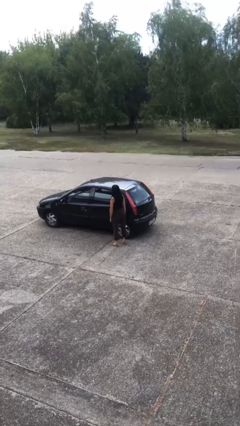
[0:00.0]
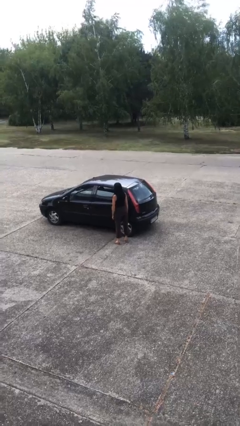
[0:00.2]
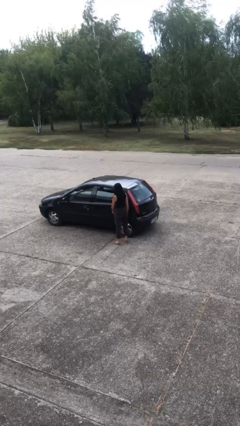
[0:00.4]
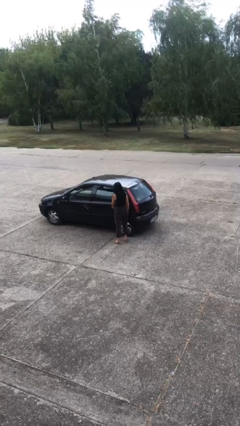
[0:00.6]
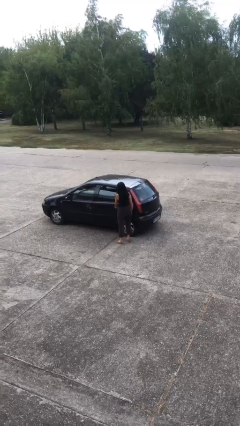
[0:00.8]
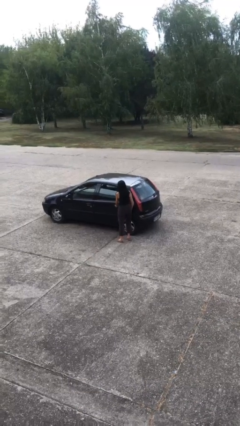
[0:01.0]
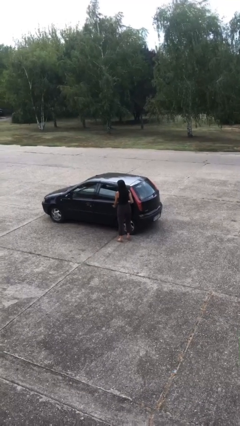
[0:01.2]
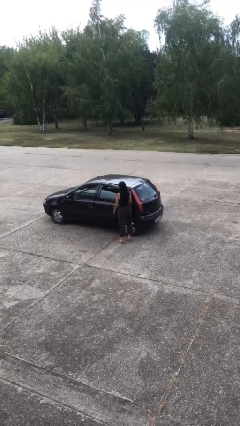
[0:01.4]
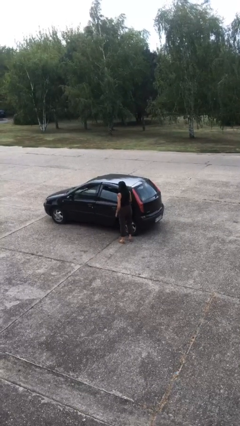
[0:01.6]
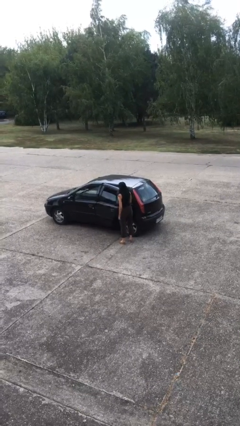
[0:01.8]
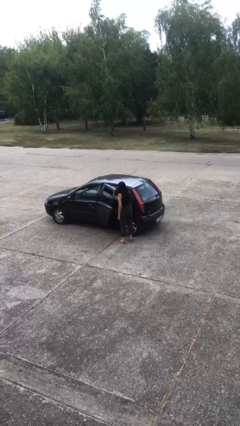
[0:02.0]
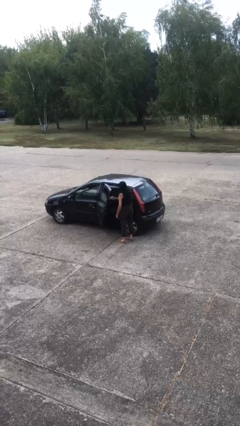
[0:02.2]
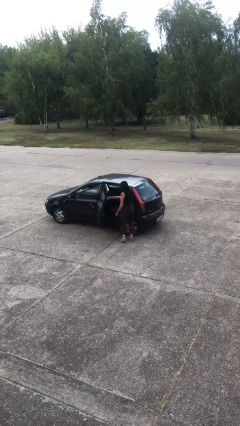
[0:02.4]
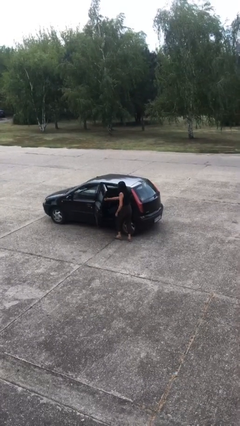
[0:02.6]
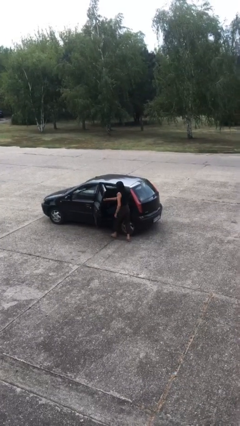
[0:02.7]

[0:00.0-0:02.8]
person opens car door

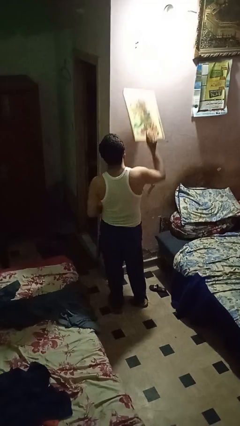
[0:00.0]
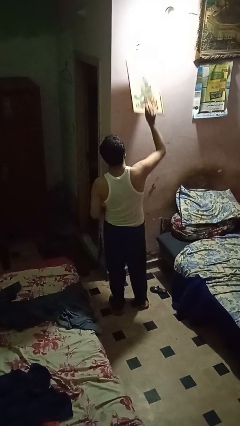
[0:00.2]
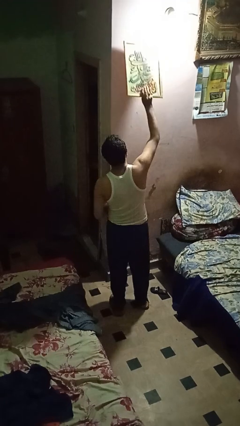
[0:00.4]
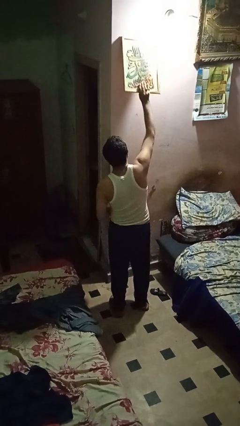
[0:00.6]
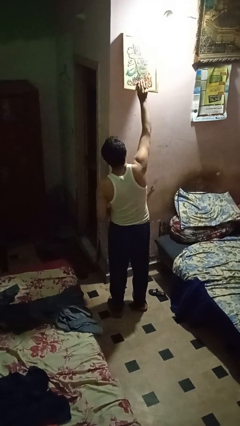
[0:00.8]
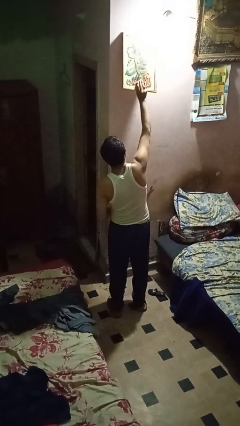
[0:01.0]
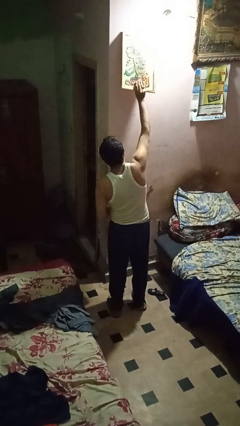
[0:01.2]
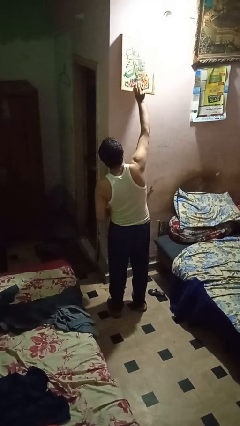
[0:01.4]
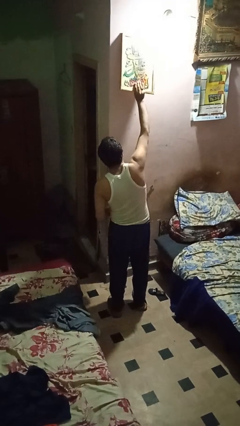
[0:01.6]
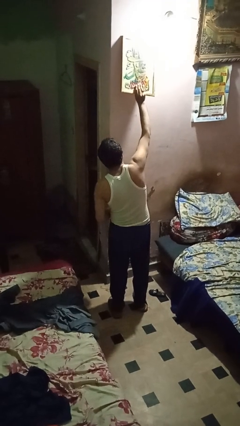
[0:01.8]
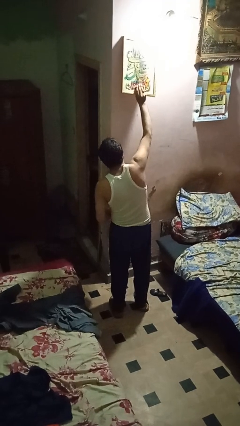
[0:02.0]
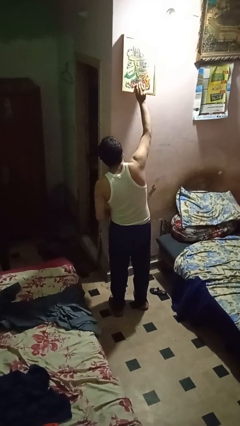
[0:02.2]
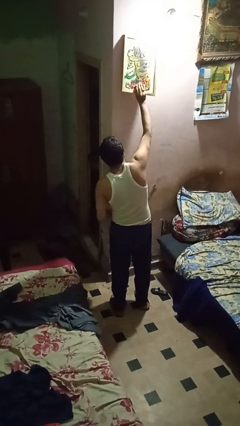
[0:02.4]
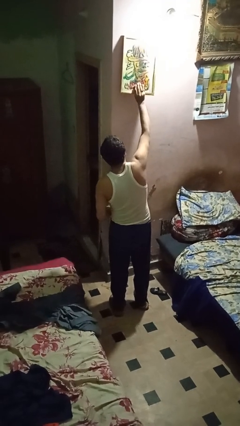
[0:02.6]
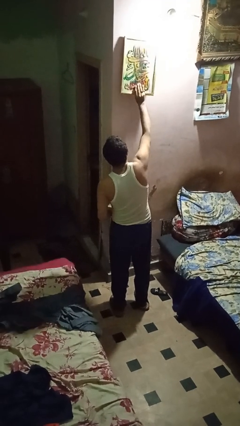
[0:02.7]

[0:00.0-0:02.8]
person puts up picture frame

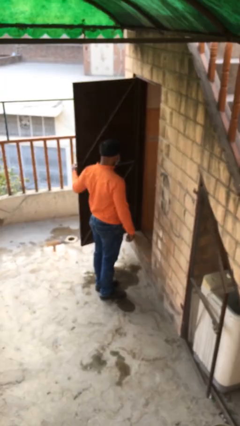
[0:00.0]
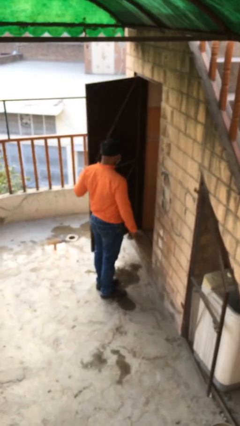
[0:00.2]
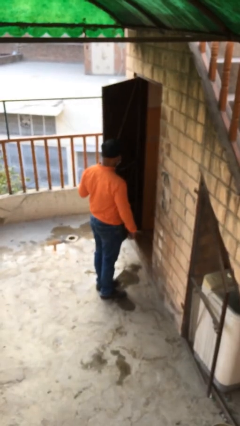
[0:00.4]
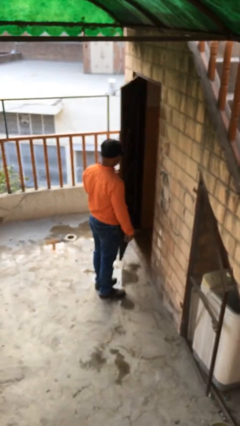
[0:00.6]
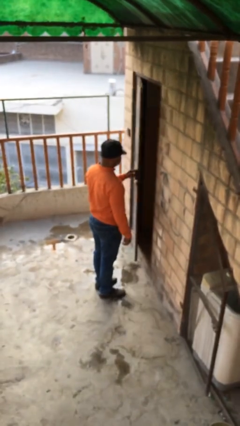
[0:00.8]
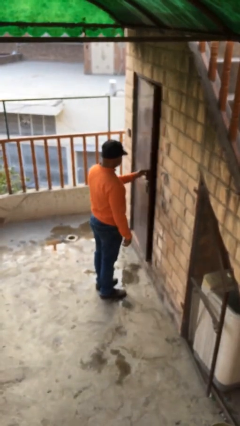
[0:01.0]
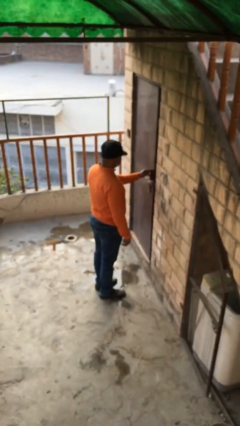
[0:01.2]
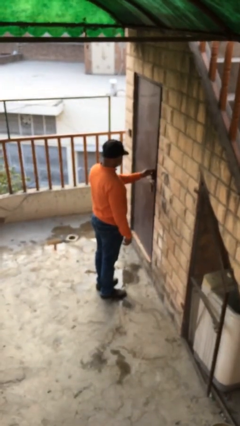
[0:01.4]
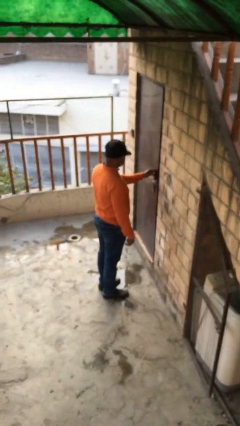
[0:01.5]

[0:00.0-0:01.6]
person closes facility door

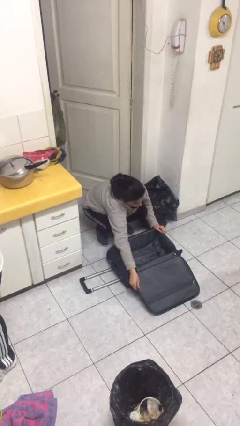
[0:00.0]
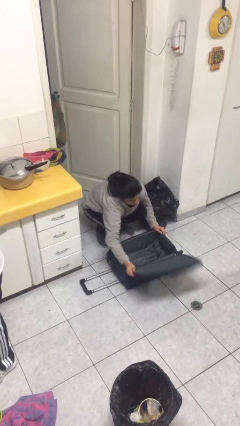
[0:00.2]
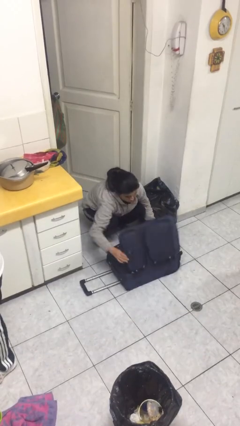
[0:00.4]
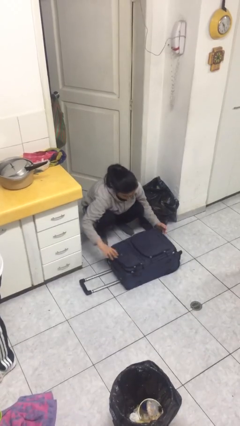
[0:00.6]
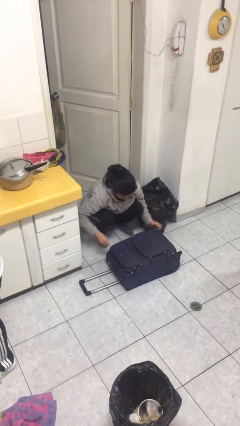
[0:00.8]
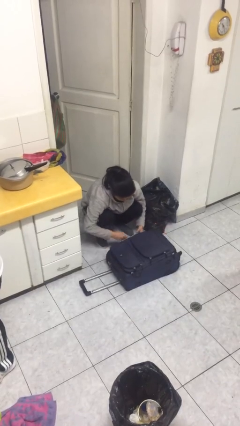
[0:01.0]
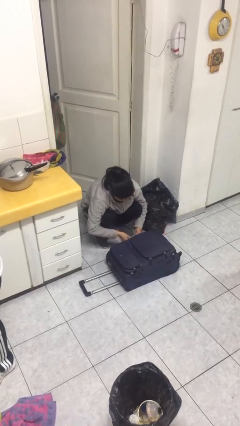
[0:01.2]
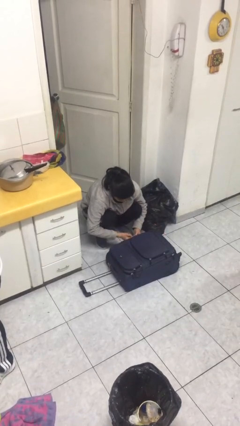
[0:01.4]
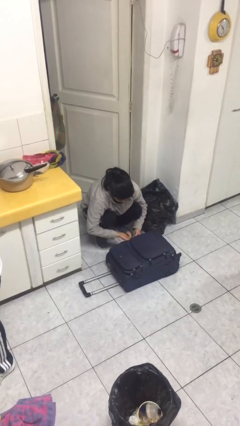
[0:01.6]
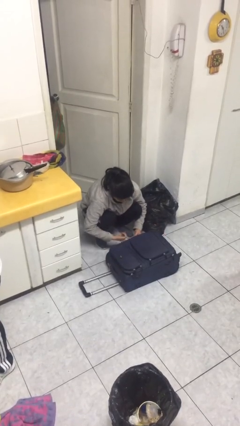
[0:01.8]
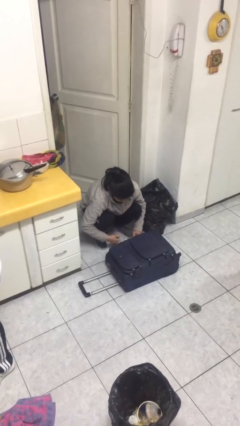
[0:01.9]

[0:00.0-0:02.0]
person closes suitcase

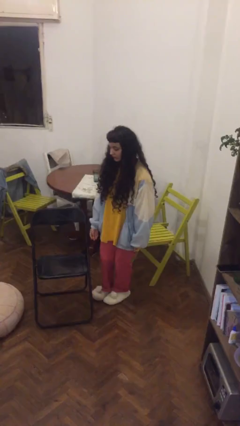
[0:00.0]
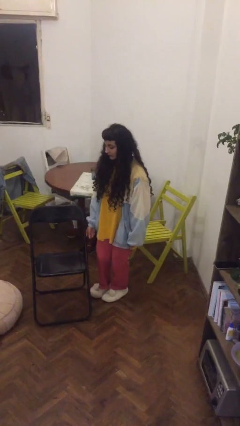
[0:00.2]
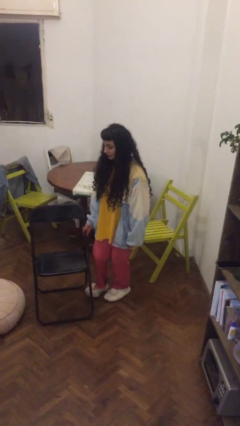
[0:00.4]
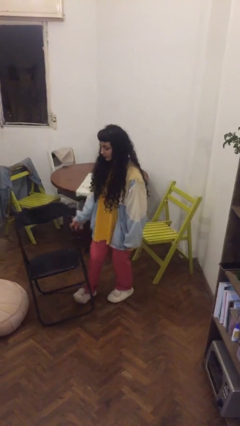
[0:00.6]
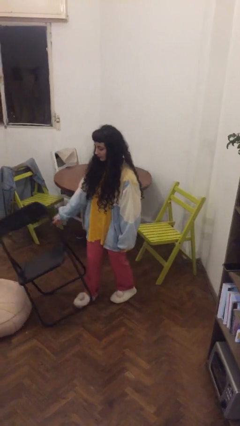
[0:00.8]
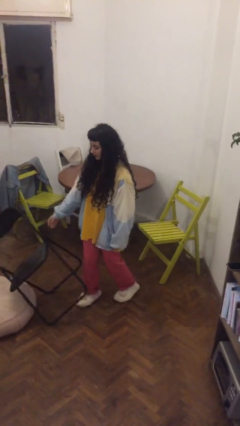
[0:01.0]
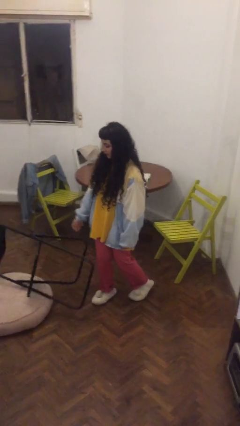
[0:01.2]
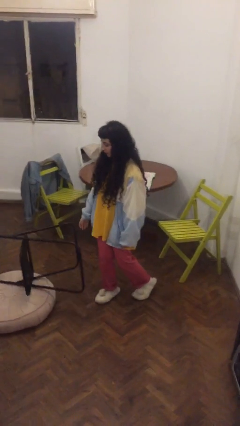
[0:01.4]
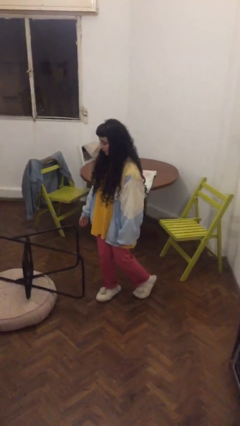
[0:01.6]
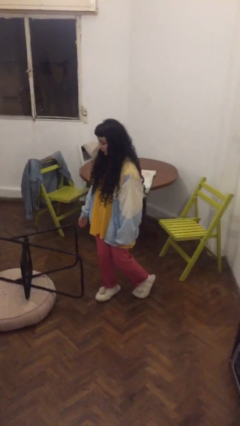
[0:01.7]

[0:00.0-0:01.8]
person knocks over furniture

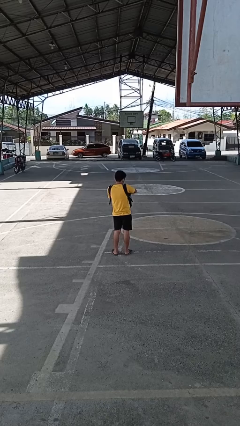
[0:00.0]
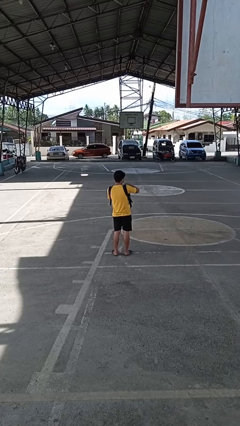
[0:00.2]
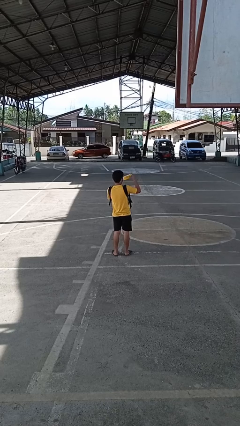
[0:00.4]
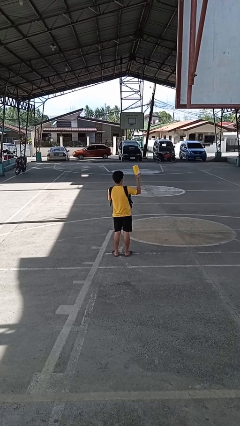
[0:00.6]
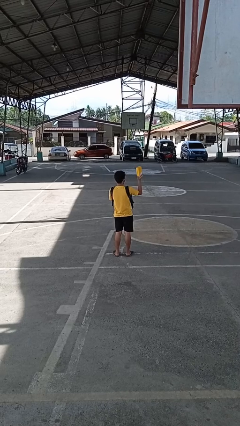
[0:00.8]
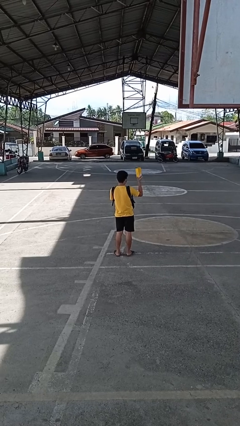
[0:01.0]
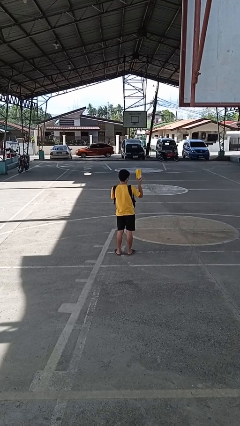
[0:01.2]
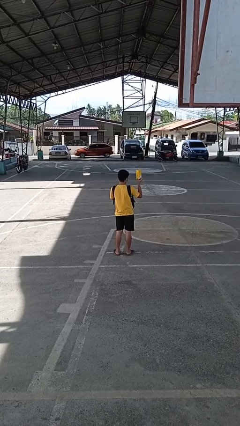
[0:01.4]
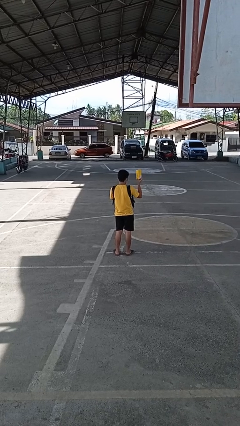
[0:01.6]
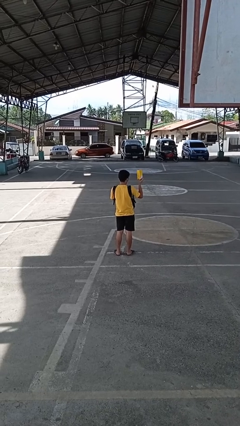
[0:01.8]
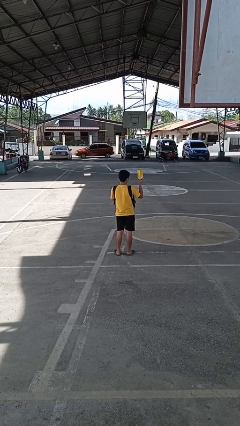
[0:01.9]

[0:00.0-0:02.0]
person takes object from backpack

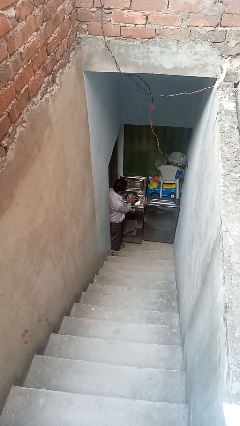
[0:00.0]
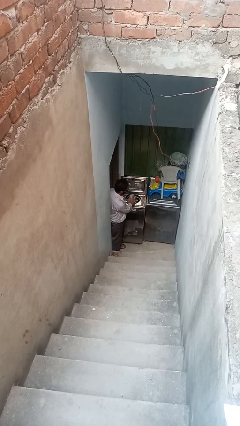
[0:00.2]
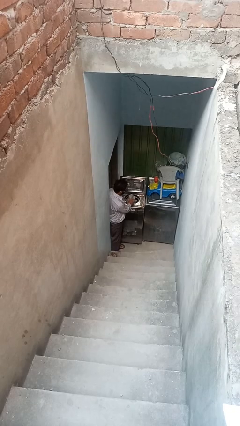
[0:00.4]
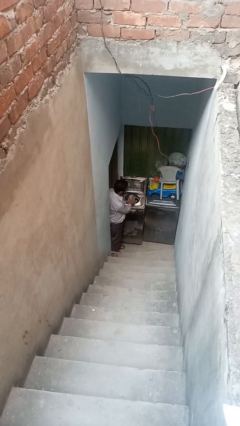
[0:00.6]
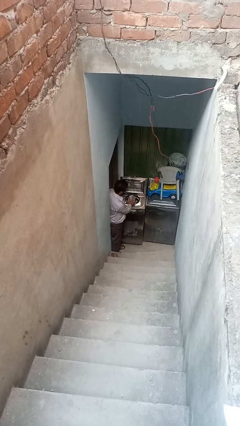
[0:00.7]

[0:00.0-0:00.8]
person loads clotheswasher

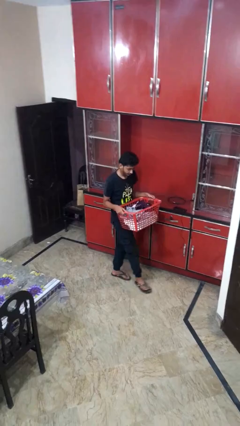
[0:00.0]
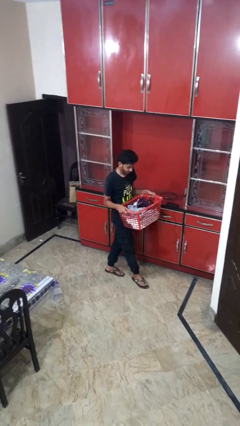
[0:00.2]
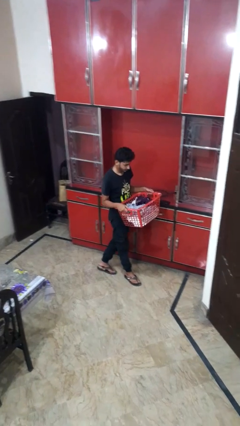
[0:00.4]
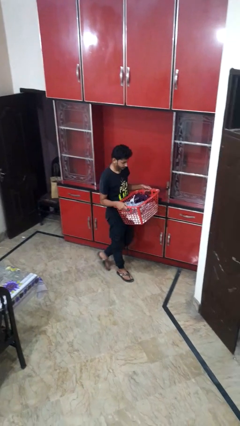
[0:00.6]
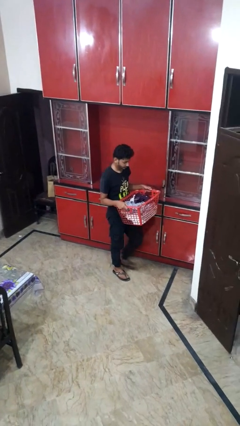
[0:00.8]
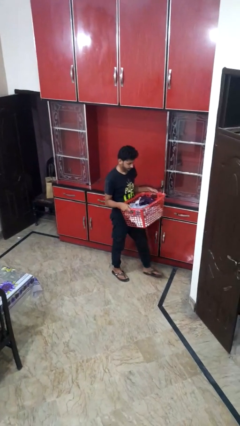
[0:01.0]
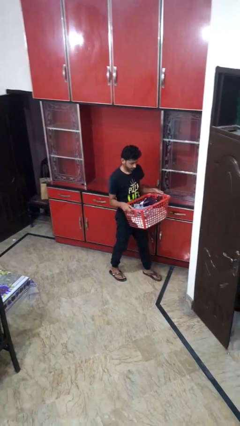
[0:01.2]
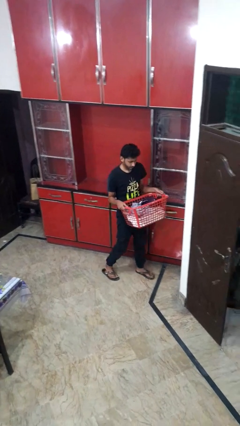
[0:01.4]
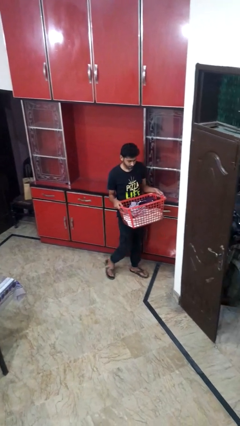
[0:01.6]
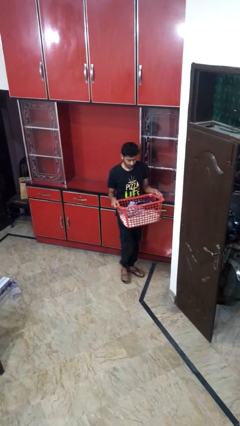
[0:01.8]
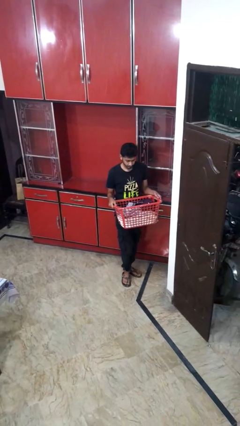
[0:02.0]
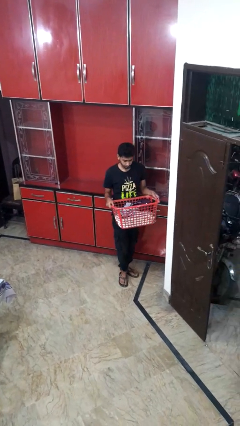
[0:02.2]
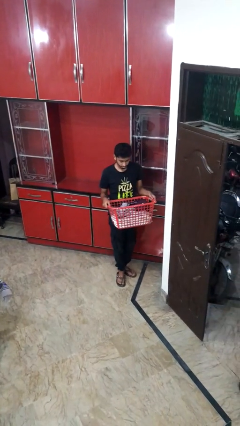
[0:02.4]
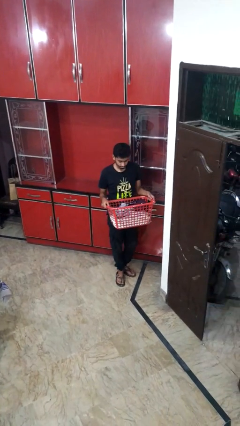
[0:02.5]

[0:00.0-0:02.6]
person carries furniture

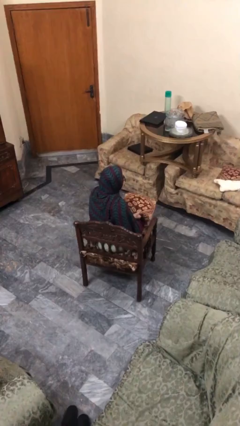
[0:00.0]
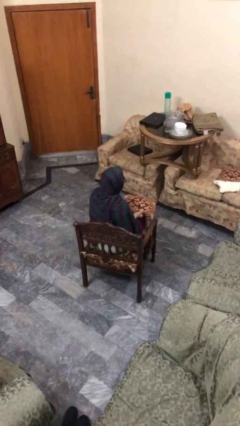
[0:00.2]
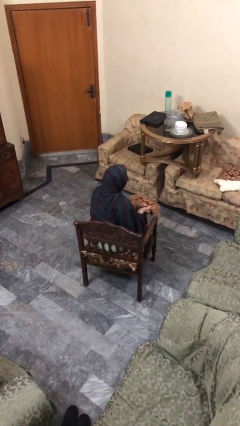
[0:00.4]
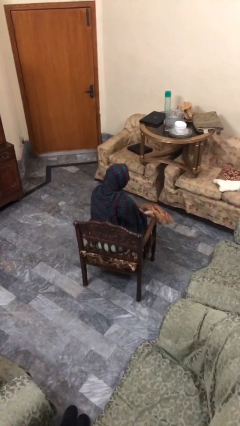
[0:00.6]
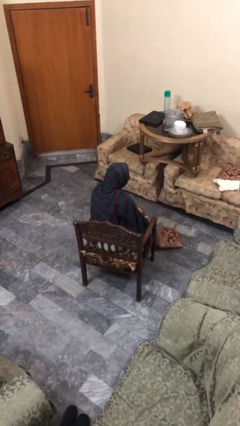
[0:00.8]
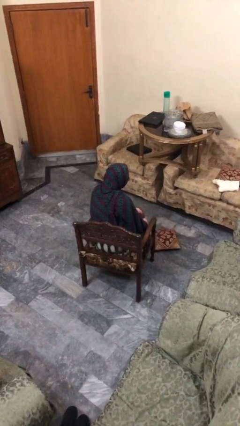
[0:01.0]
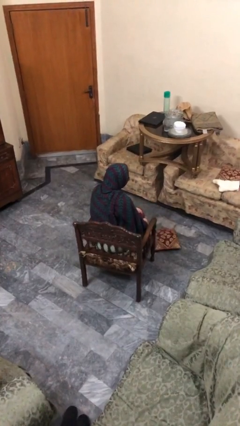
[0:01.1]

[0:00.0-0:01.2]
person drops object
